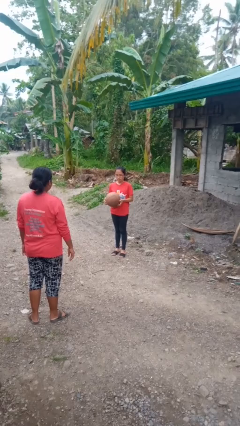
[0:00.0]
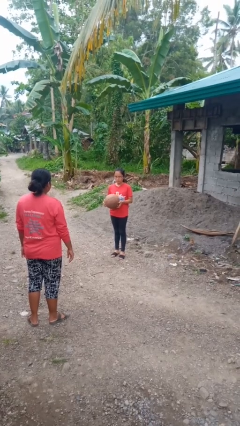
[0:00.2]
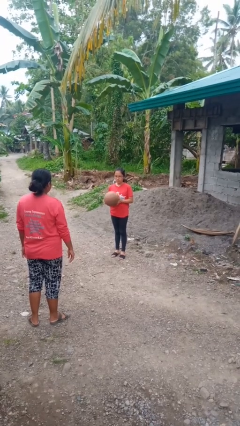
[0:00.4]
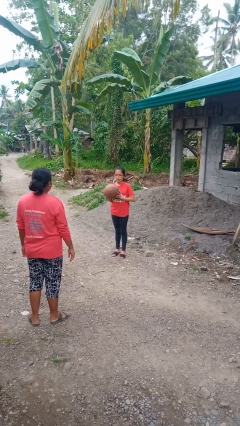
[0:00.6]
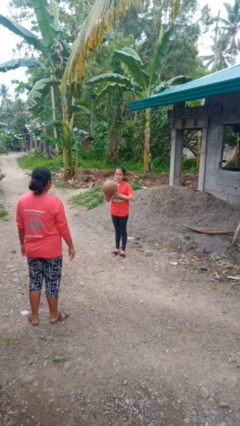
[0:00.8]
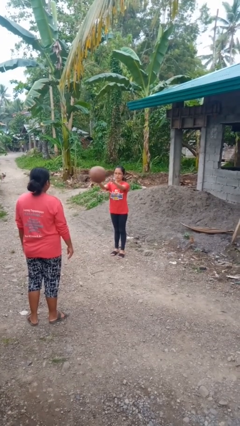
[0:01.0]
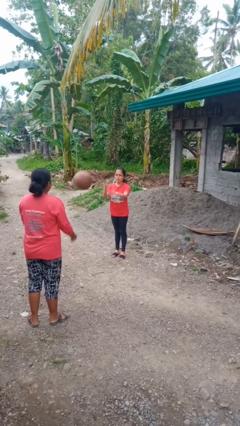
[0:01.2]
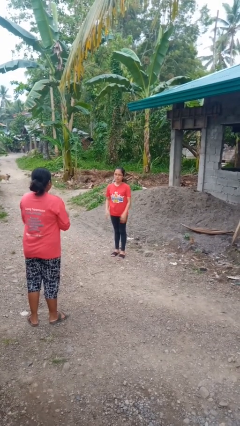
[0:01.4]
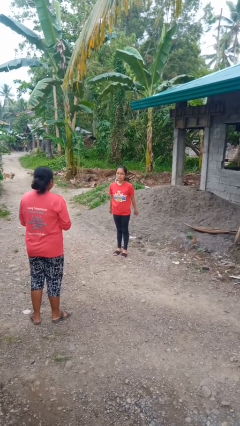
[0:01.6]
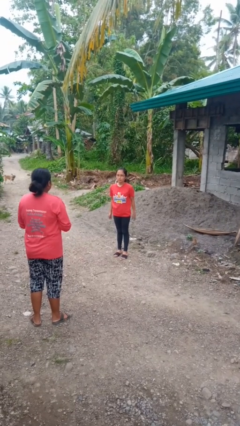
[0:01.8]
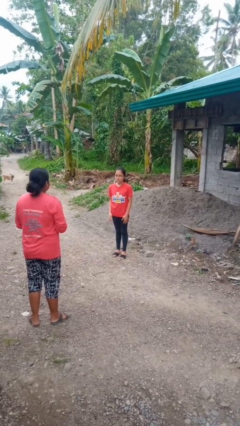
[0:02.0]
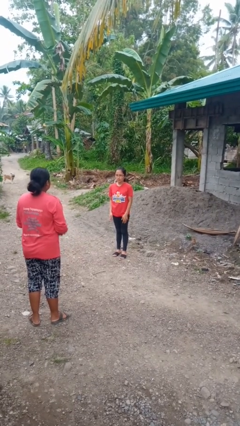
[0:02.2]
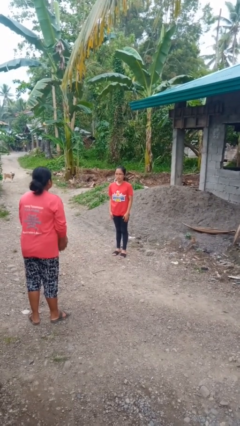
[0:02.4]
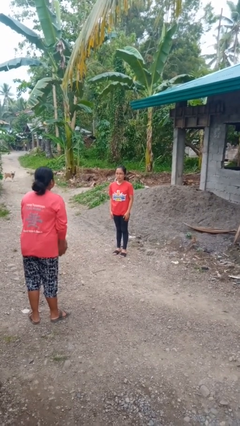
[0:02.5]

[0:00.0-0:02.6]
person throws object to person

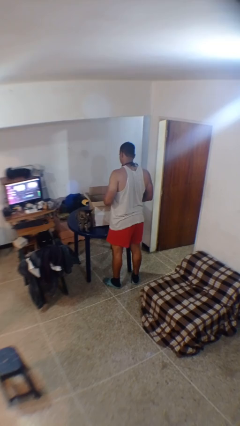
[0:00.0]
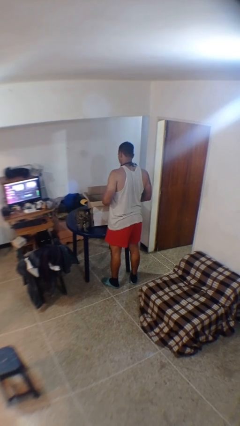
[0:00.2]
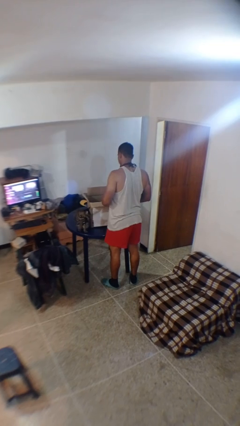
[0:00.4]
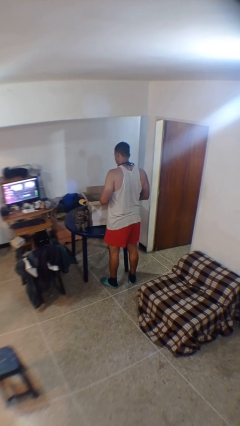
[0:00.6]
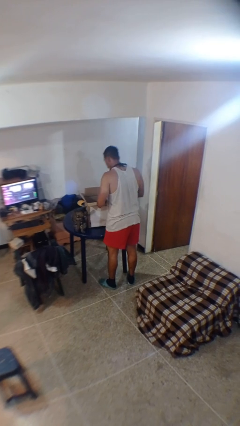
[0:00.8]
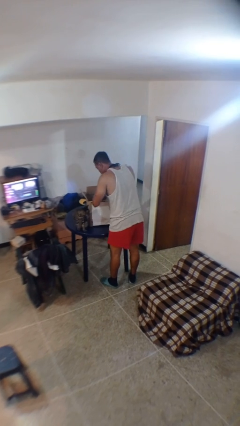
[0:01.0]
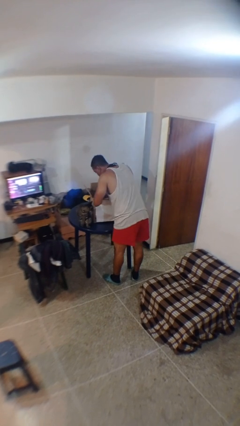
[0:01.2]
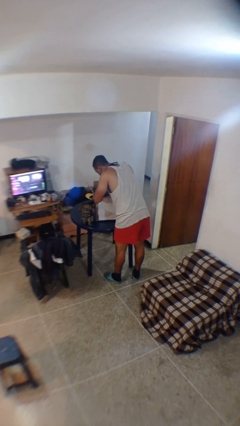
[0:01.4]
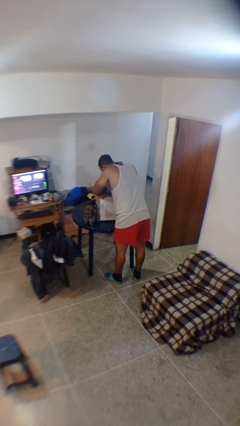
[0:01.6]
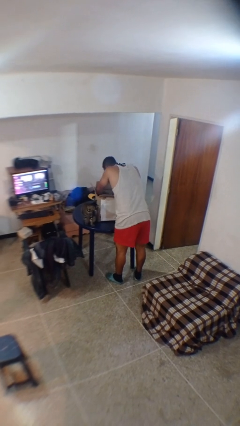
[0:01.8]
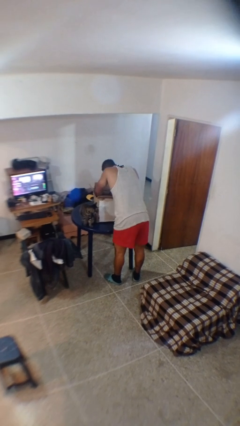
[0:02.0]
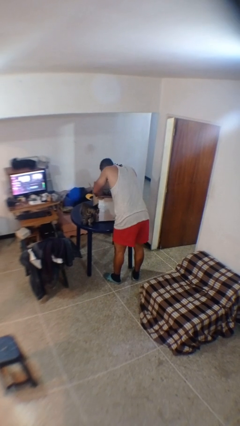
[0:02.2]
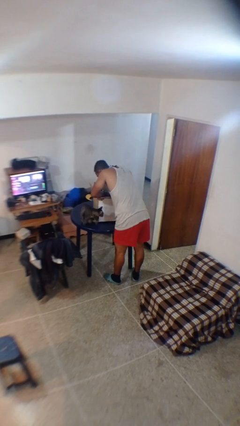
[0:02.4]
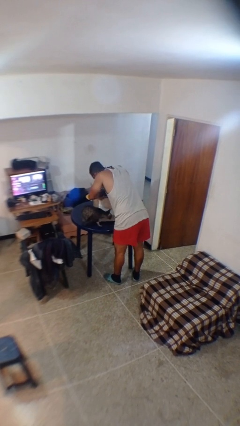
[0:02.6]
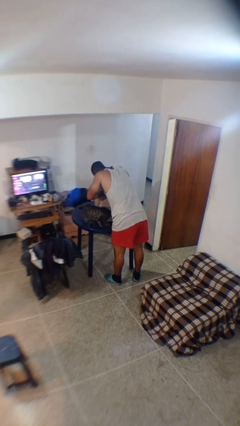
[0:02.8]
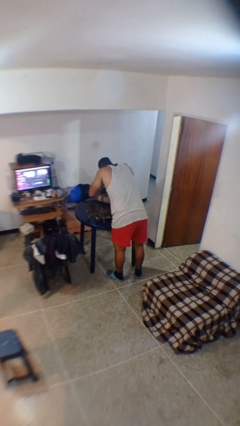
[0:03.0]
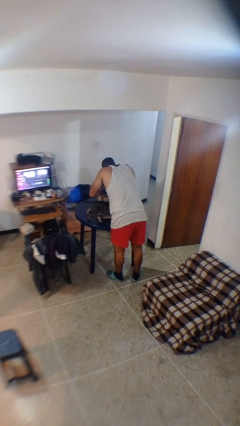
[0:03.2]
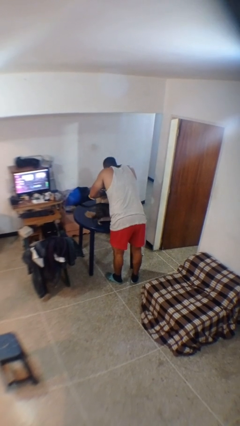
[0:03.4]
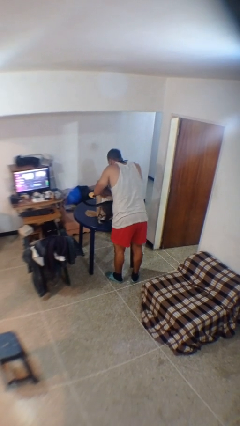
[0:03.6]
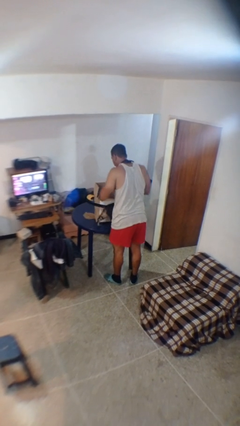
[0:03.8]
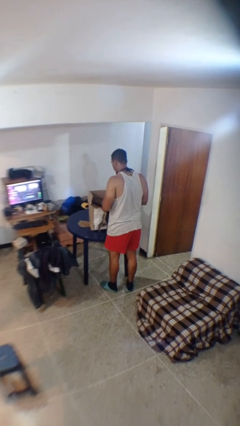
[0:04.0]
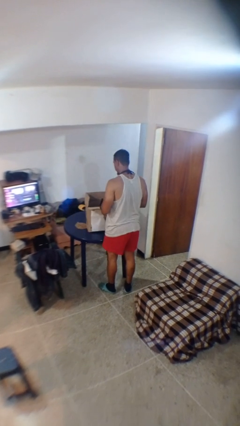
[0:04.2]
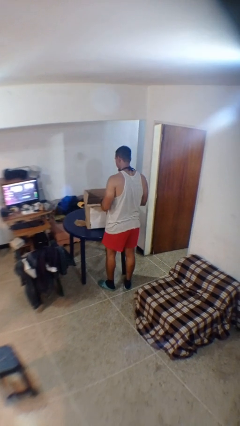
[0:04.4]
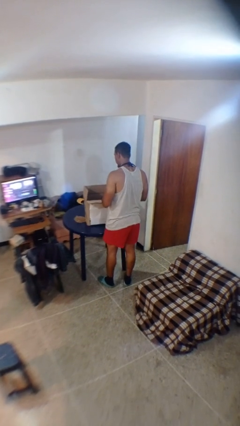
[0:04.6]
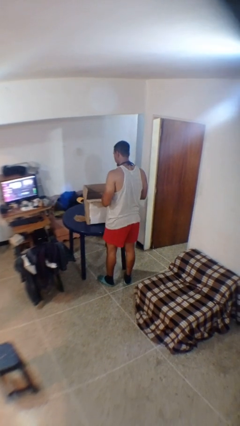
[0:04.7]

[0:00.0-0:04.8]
person searches in box

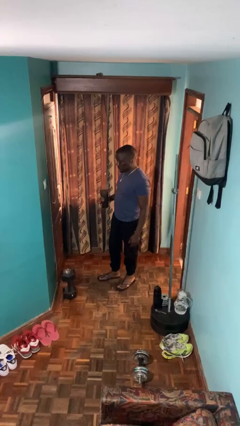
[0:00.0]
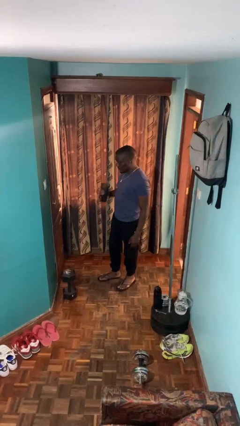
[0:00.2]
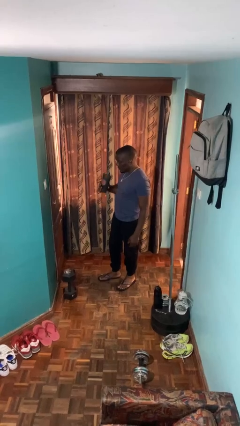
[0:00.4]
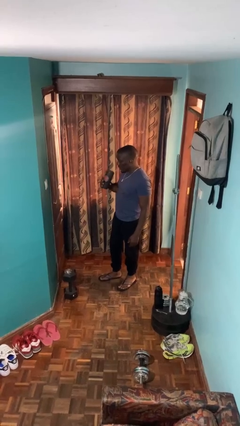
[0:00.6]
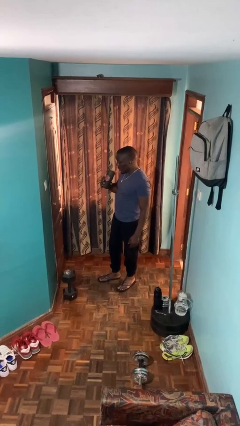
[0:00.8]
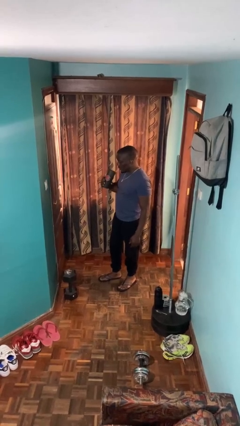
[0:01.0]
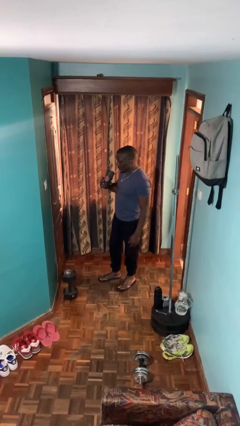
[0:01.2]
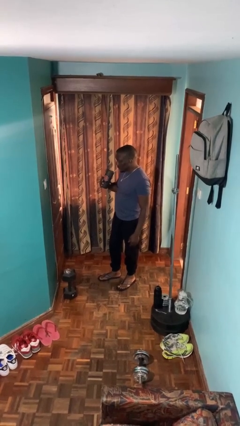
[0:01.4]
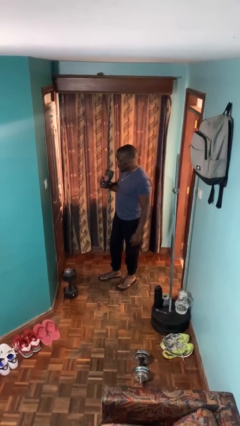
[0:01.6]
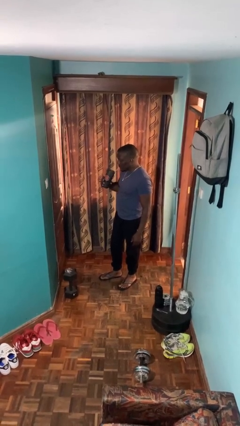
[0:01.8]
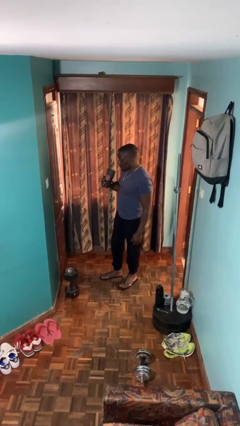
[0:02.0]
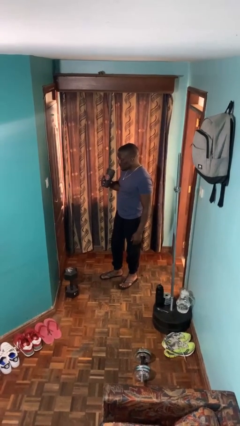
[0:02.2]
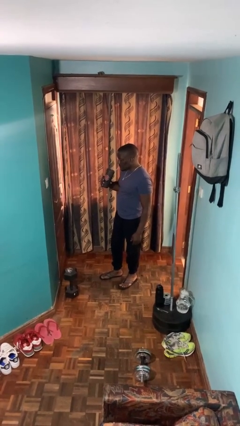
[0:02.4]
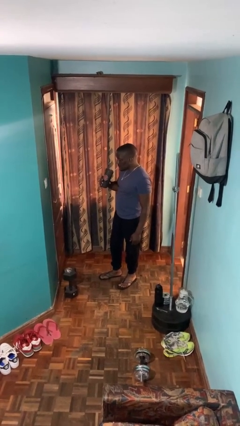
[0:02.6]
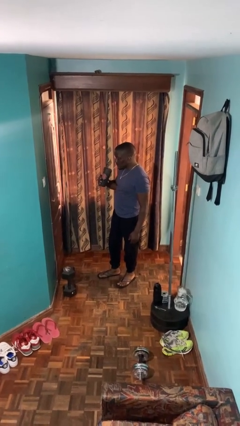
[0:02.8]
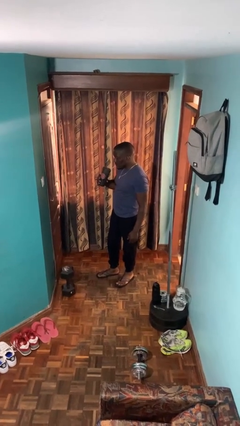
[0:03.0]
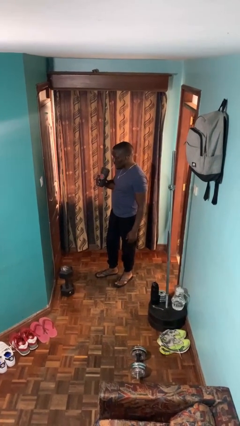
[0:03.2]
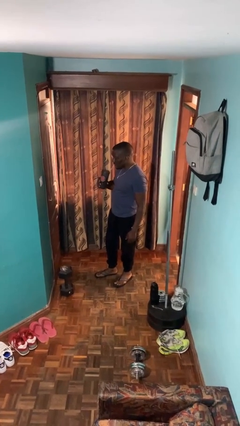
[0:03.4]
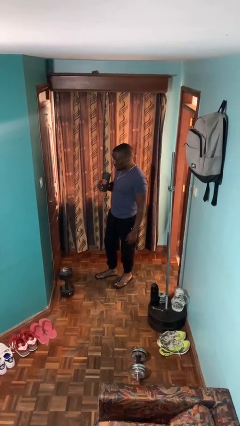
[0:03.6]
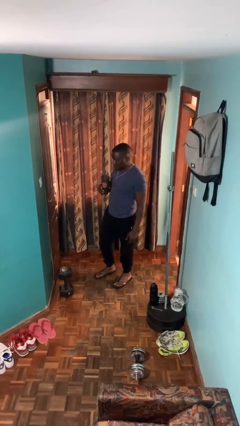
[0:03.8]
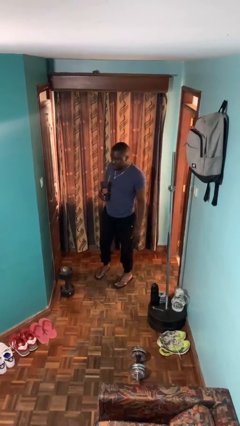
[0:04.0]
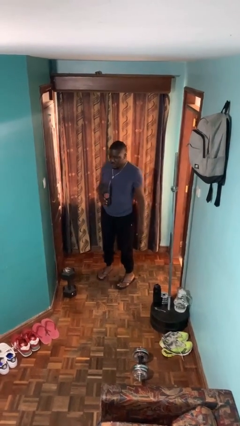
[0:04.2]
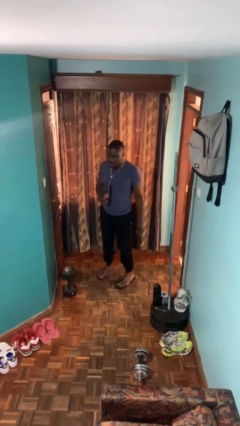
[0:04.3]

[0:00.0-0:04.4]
person drinks from straw

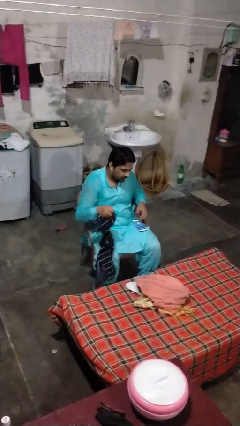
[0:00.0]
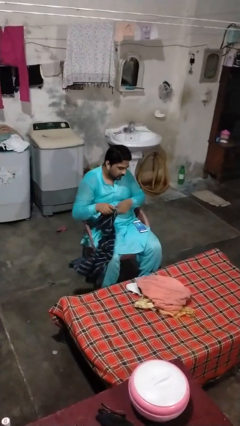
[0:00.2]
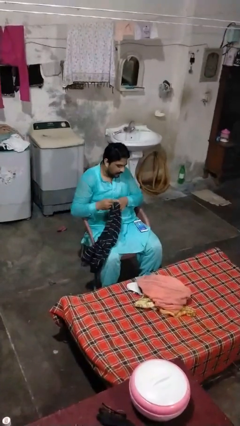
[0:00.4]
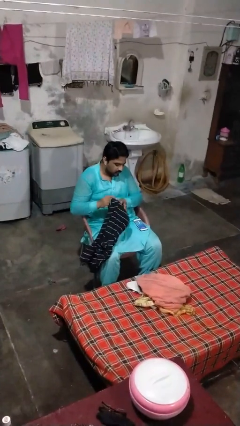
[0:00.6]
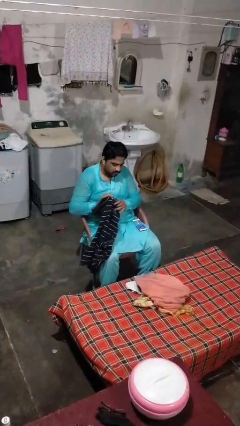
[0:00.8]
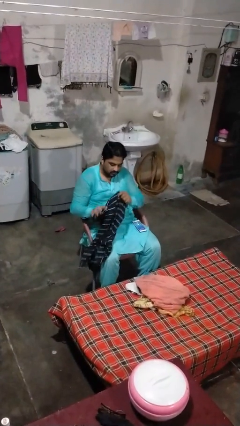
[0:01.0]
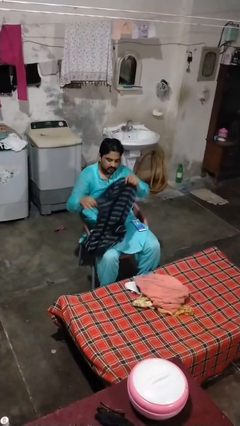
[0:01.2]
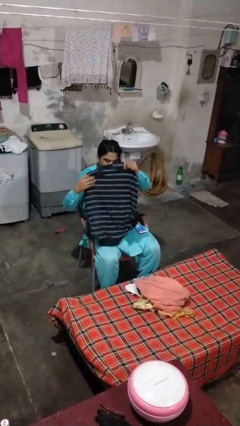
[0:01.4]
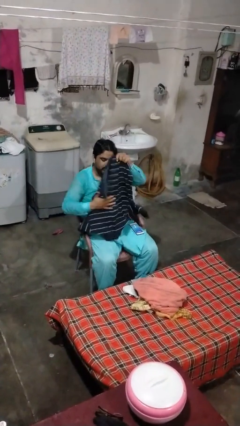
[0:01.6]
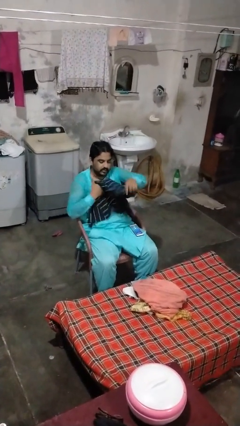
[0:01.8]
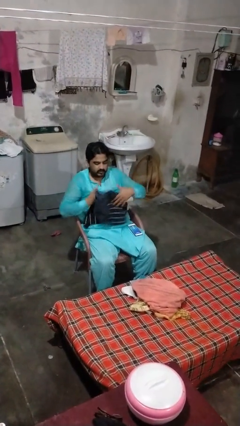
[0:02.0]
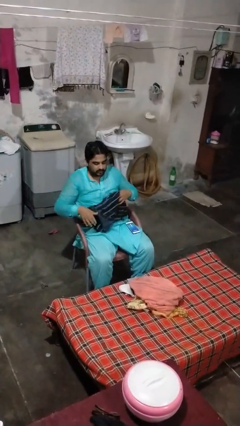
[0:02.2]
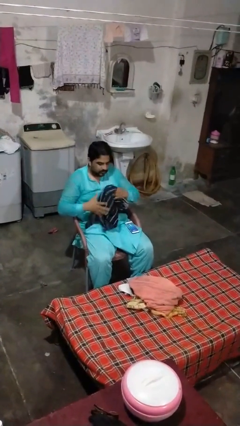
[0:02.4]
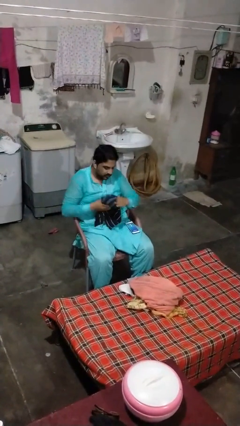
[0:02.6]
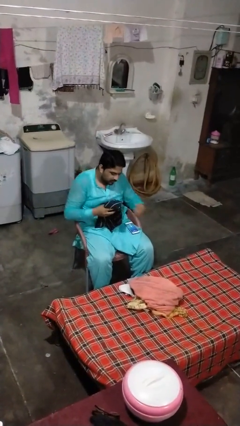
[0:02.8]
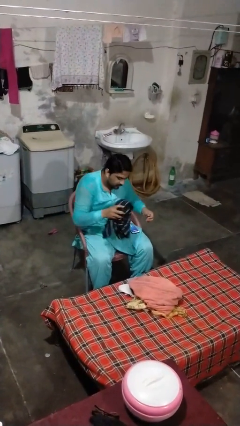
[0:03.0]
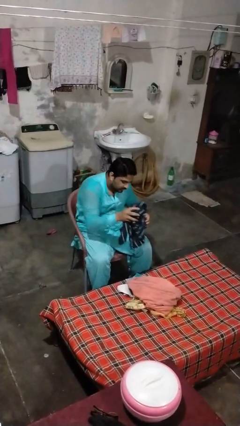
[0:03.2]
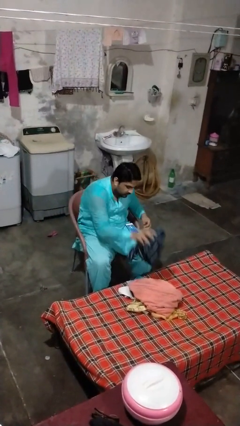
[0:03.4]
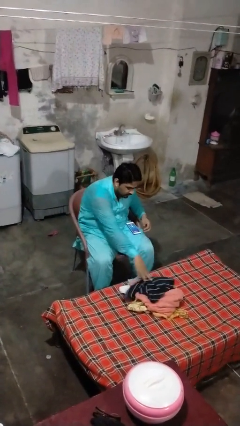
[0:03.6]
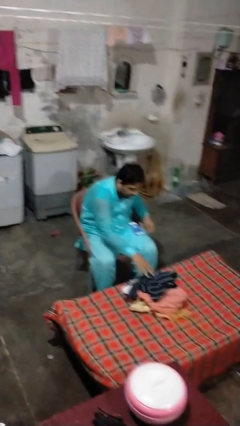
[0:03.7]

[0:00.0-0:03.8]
person folds shirt

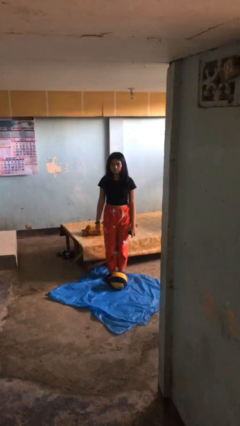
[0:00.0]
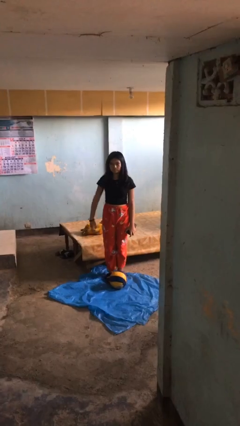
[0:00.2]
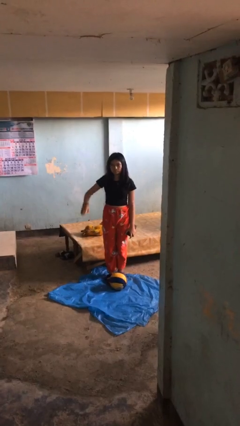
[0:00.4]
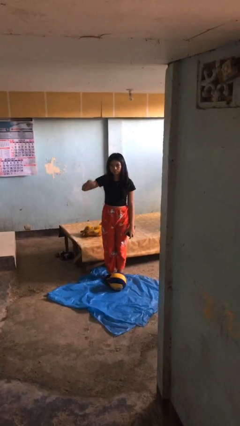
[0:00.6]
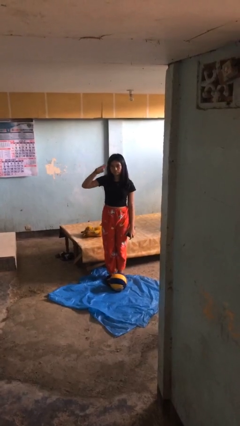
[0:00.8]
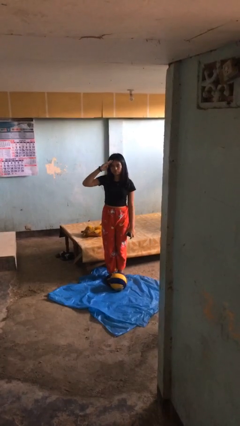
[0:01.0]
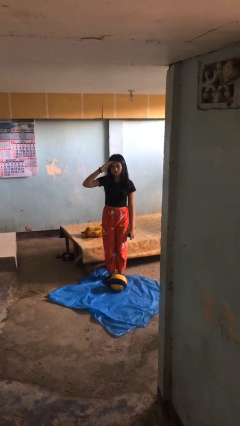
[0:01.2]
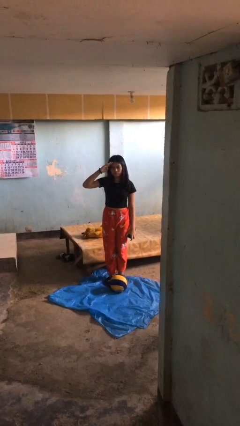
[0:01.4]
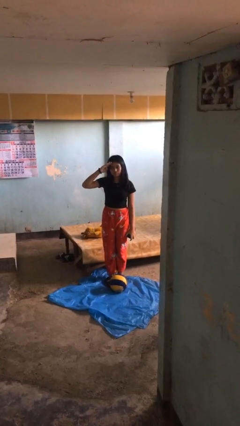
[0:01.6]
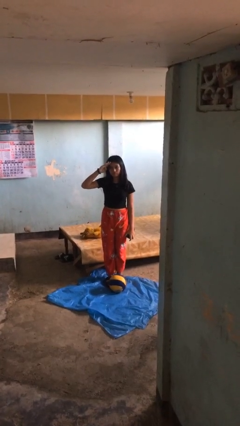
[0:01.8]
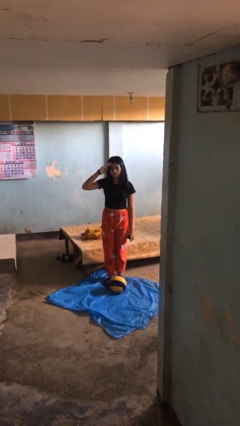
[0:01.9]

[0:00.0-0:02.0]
person salutes

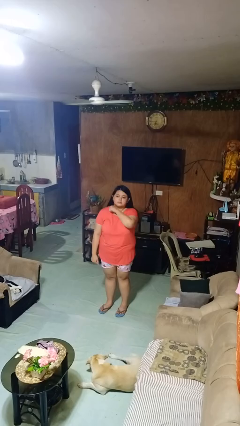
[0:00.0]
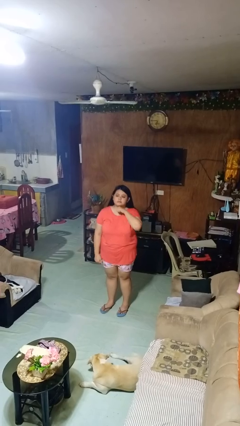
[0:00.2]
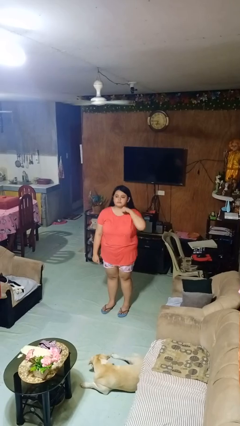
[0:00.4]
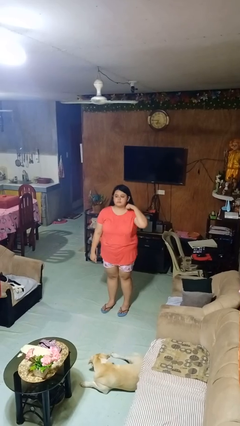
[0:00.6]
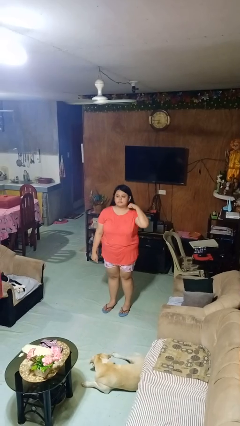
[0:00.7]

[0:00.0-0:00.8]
person gestures cut
